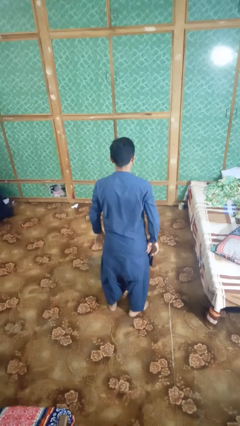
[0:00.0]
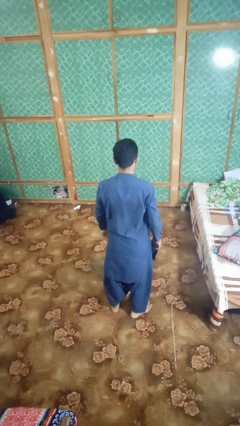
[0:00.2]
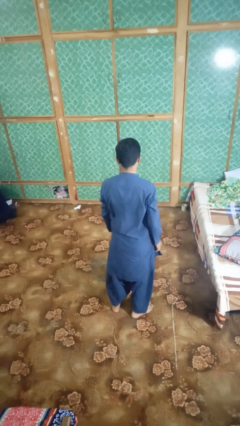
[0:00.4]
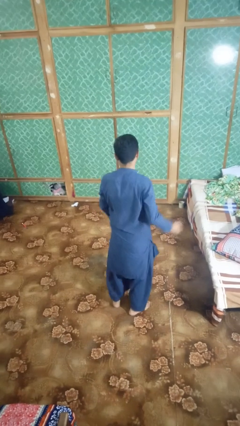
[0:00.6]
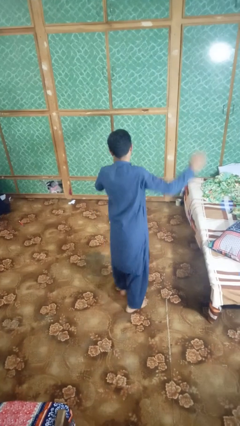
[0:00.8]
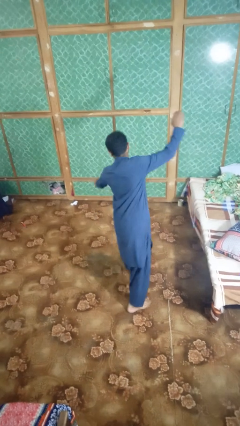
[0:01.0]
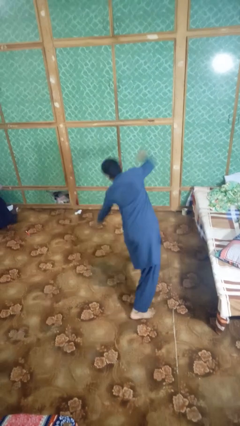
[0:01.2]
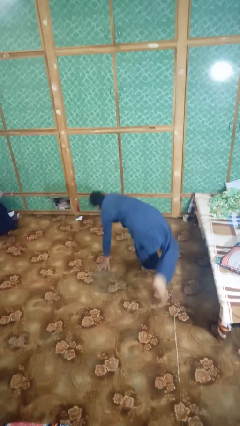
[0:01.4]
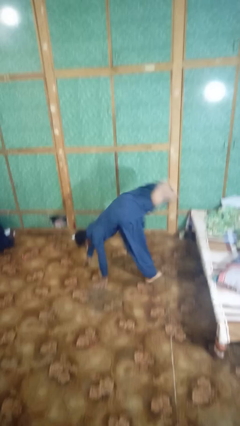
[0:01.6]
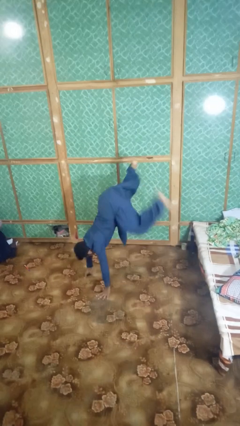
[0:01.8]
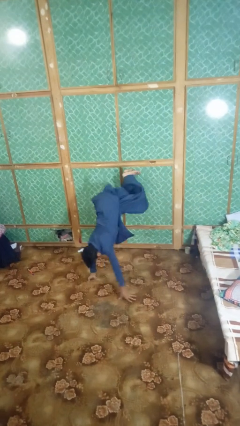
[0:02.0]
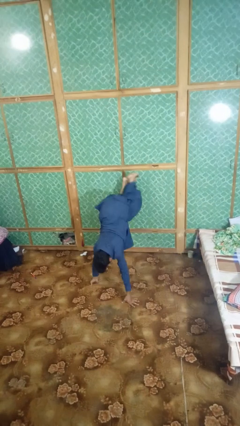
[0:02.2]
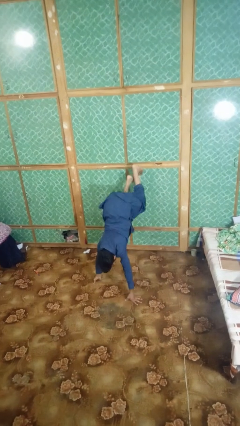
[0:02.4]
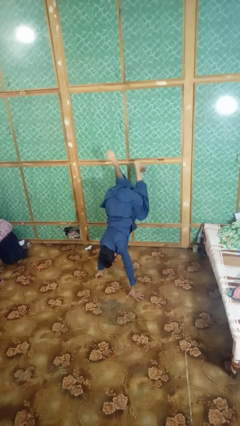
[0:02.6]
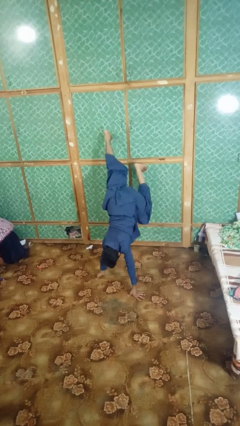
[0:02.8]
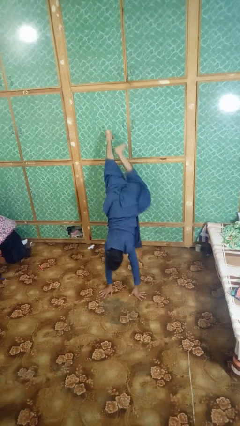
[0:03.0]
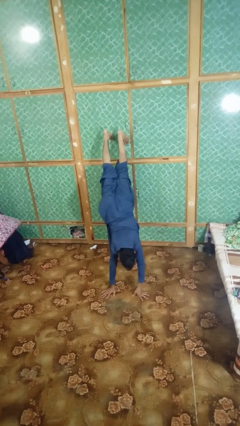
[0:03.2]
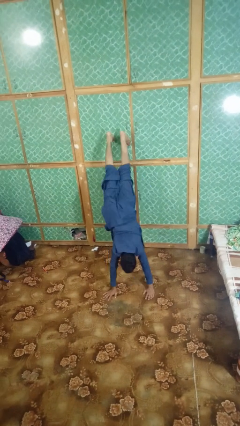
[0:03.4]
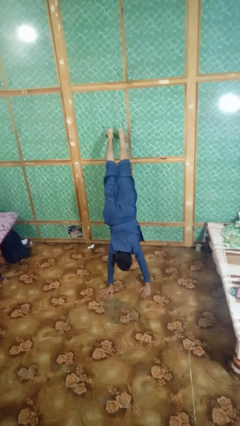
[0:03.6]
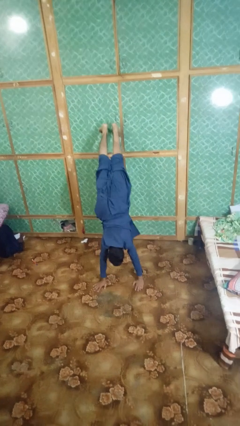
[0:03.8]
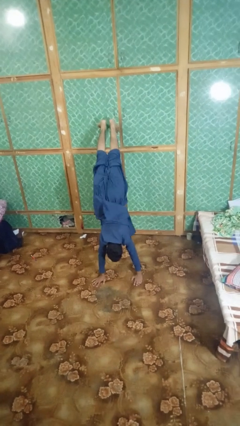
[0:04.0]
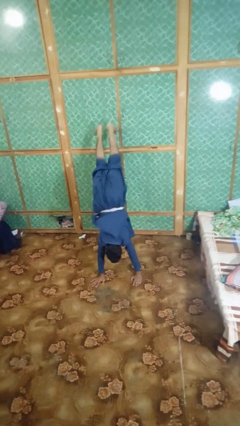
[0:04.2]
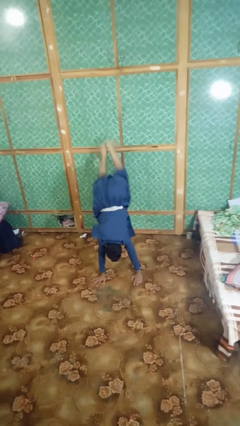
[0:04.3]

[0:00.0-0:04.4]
person handstand

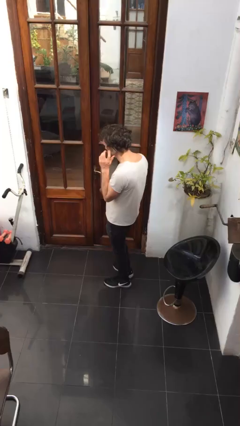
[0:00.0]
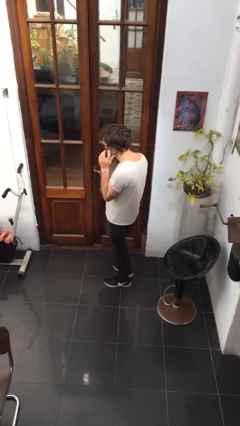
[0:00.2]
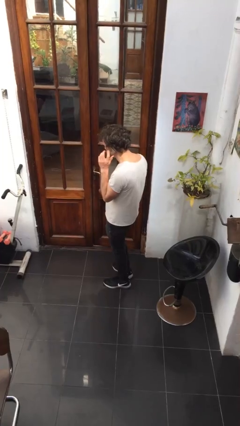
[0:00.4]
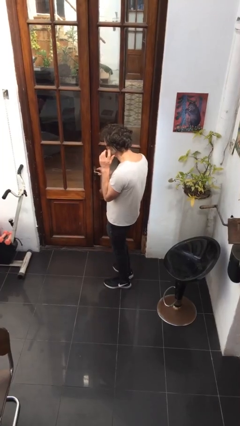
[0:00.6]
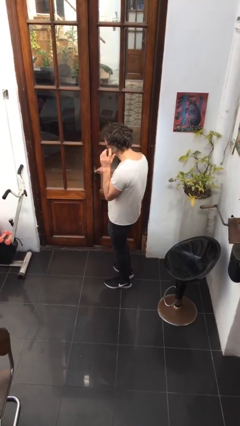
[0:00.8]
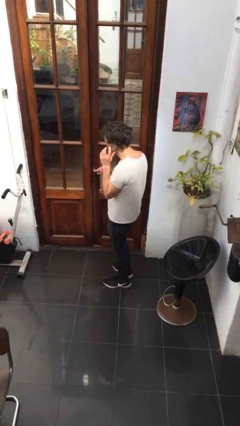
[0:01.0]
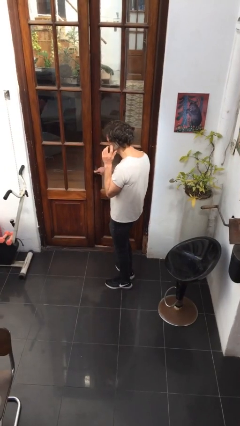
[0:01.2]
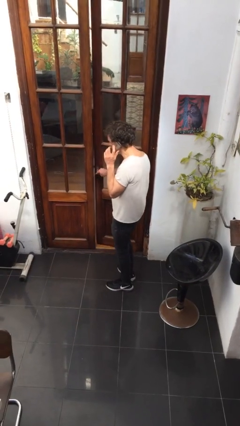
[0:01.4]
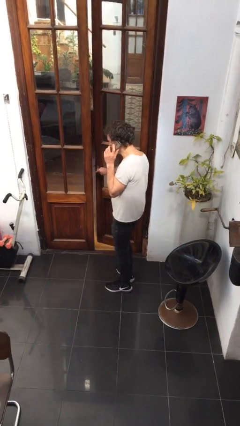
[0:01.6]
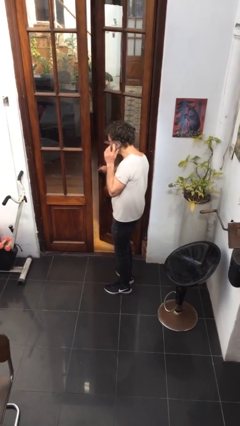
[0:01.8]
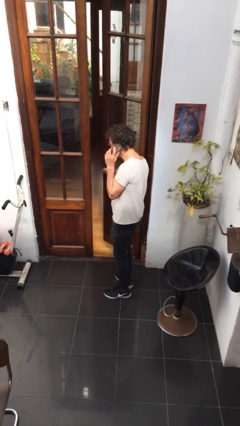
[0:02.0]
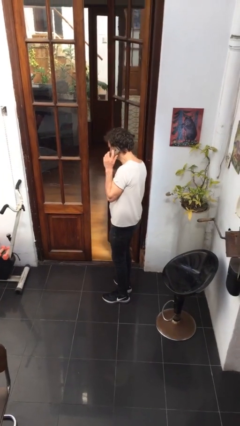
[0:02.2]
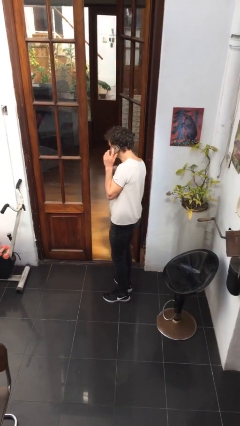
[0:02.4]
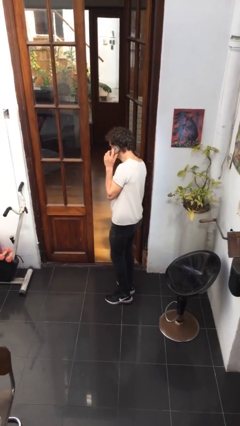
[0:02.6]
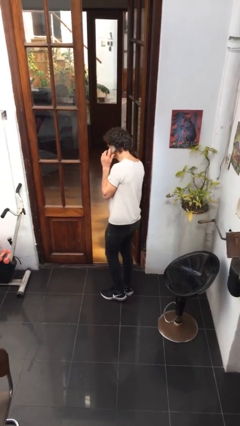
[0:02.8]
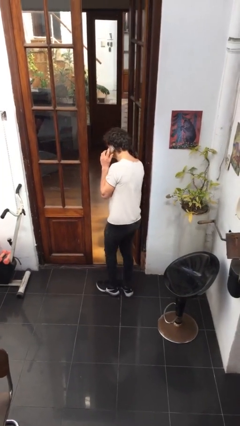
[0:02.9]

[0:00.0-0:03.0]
person opens facility door

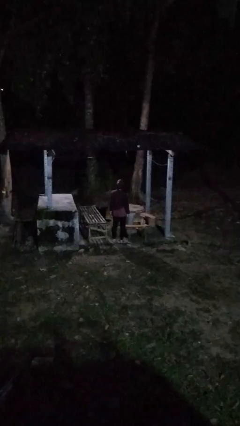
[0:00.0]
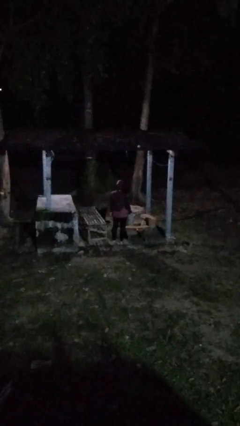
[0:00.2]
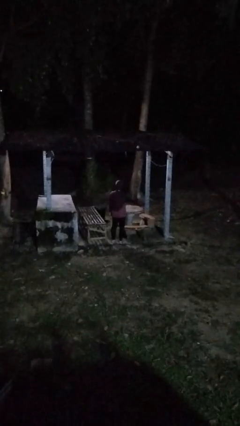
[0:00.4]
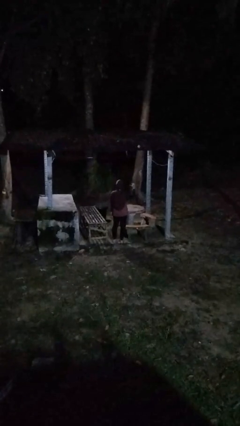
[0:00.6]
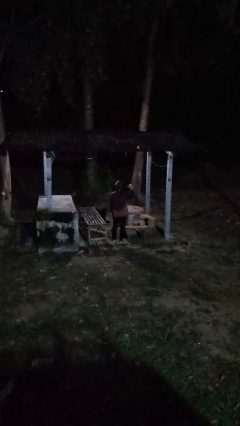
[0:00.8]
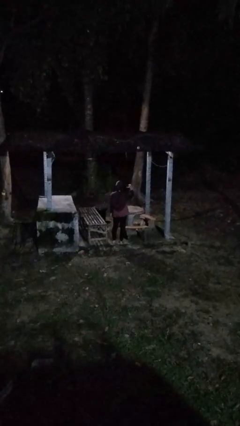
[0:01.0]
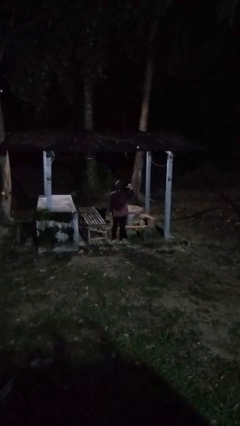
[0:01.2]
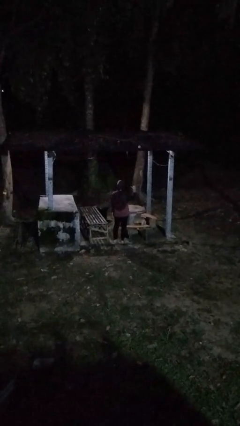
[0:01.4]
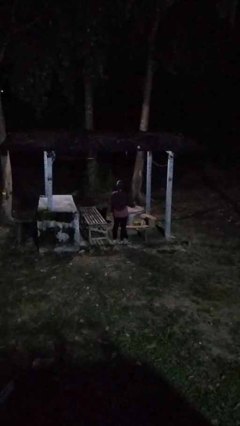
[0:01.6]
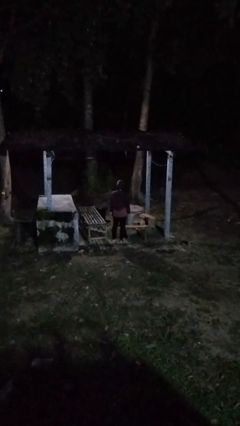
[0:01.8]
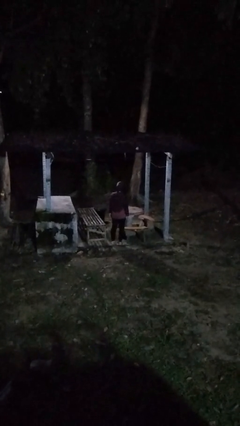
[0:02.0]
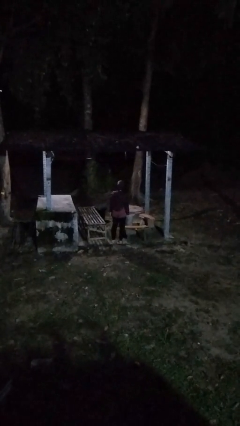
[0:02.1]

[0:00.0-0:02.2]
person gestures behind me

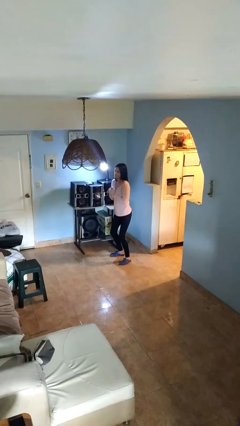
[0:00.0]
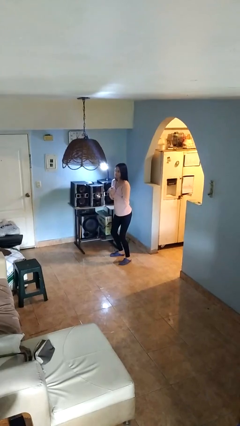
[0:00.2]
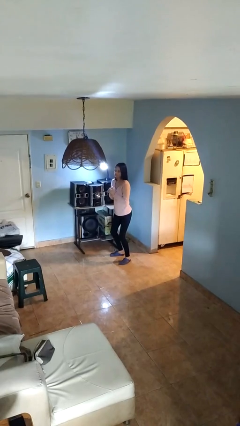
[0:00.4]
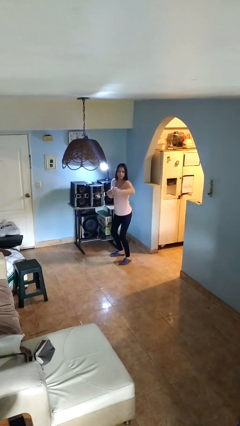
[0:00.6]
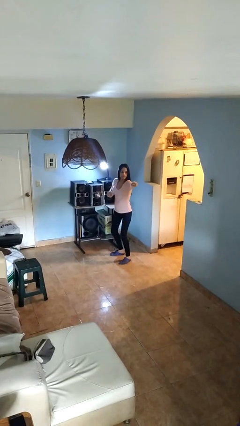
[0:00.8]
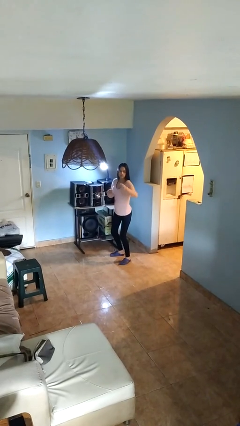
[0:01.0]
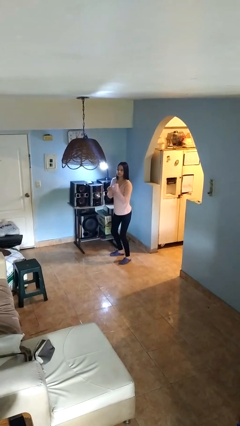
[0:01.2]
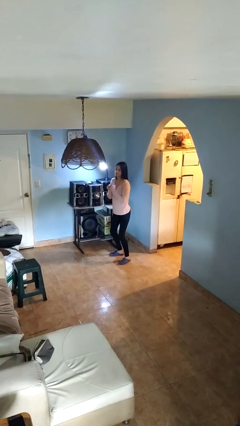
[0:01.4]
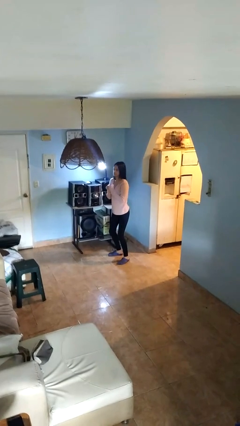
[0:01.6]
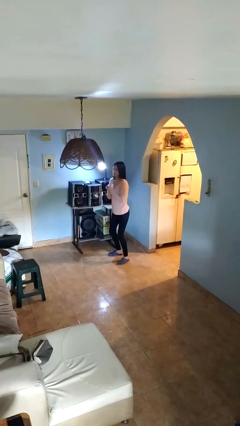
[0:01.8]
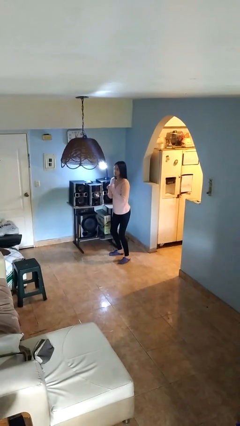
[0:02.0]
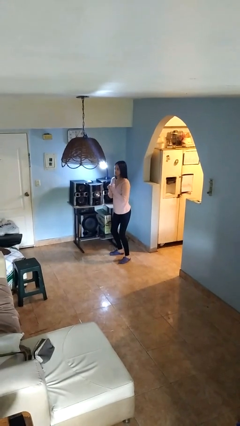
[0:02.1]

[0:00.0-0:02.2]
person karate chop

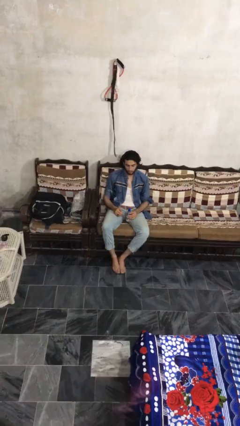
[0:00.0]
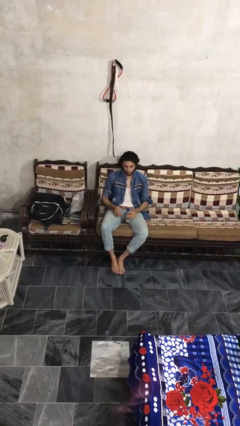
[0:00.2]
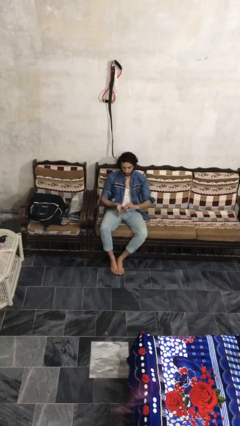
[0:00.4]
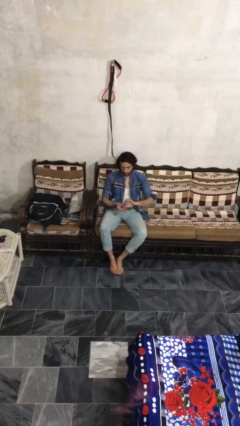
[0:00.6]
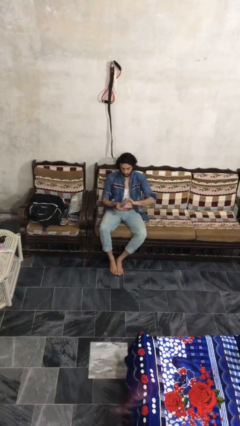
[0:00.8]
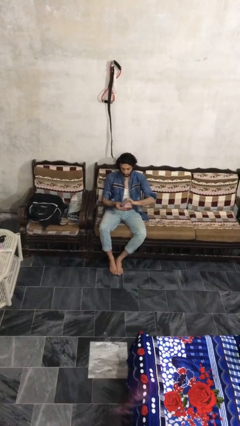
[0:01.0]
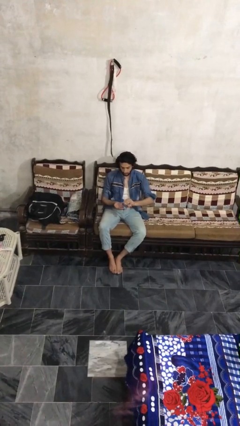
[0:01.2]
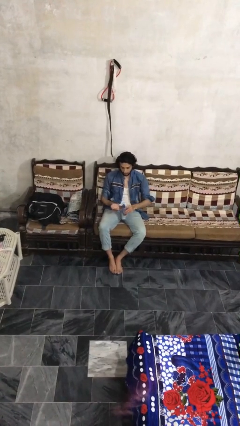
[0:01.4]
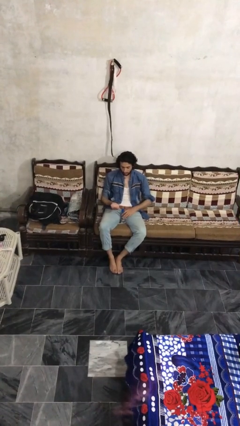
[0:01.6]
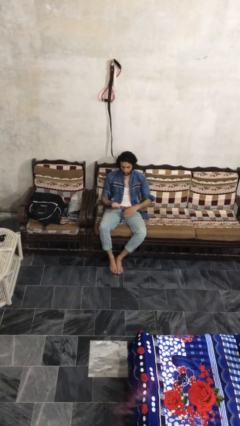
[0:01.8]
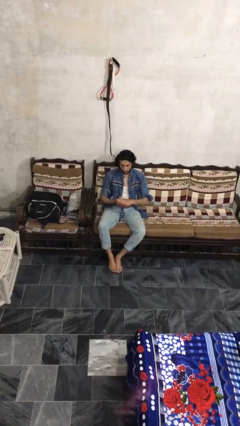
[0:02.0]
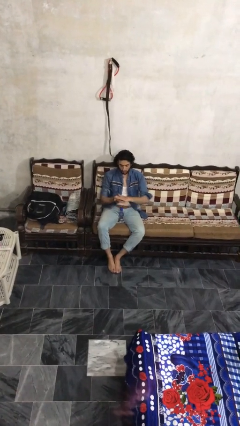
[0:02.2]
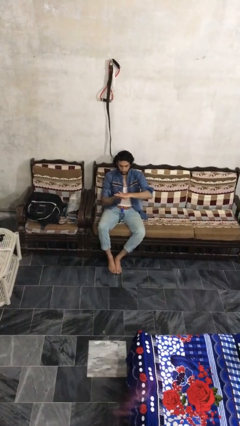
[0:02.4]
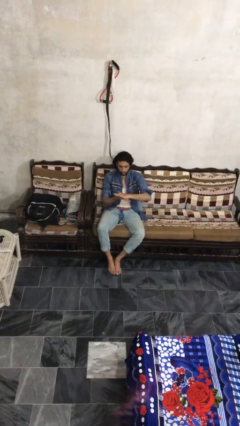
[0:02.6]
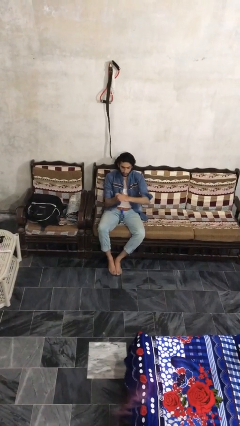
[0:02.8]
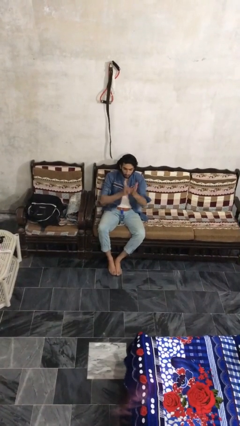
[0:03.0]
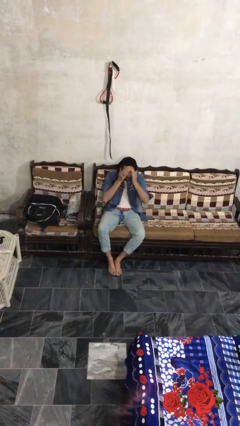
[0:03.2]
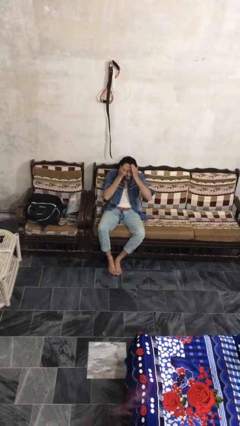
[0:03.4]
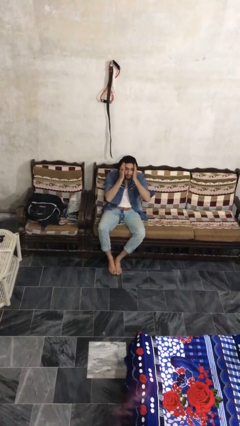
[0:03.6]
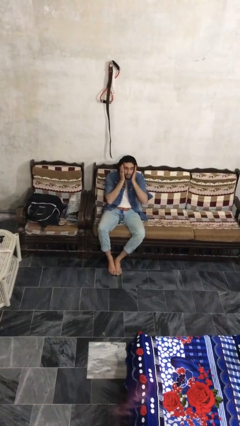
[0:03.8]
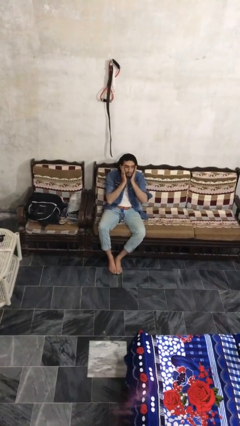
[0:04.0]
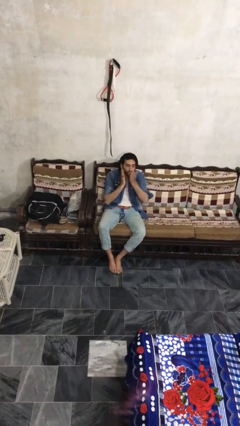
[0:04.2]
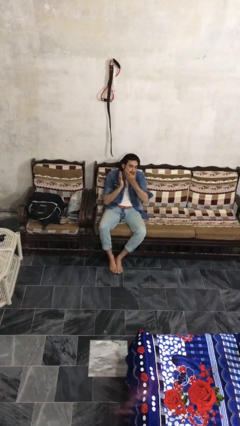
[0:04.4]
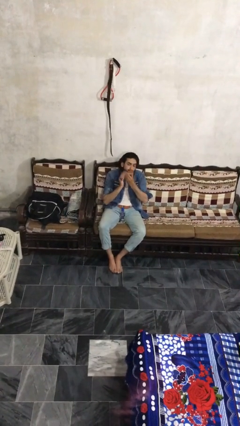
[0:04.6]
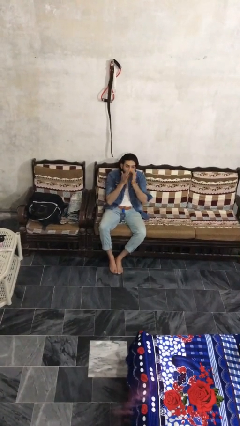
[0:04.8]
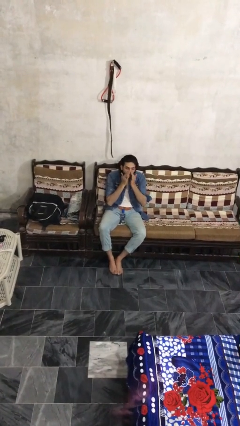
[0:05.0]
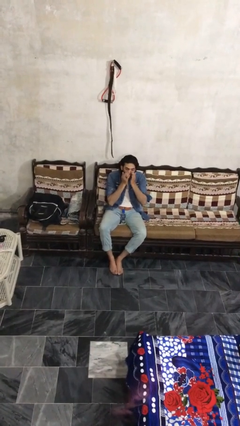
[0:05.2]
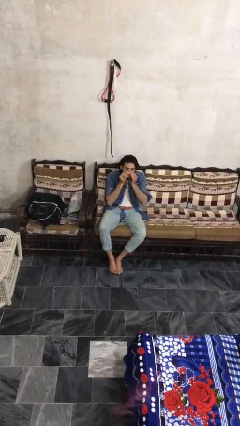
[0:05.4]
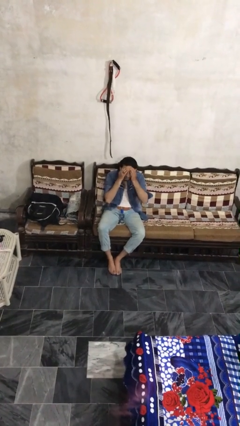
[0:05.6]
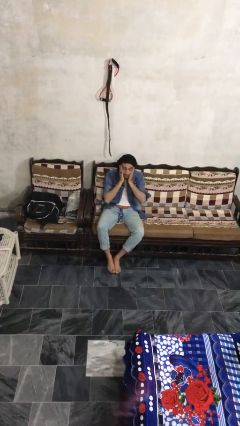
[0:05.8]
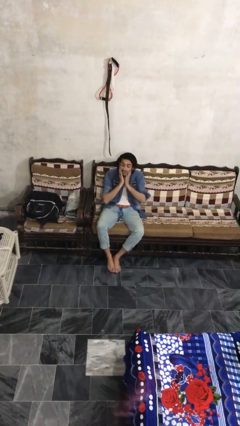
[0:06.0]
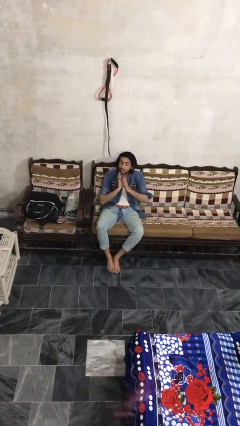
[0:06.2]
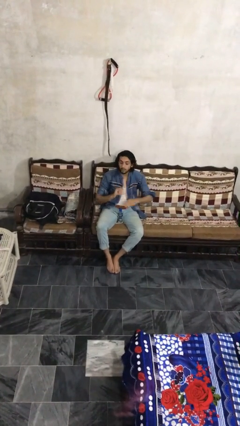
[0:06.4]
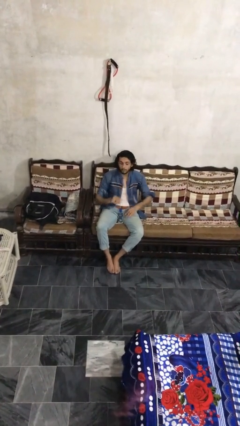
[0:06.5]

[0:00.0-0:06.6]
person applies facial moisturizer
